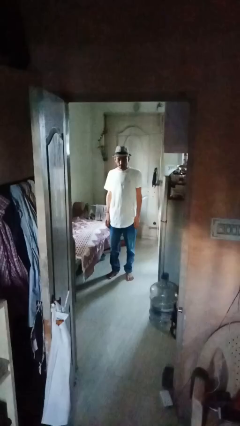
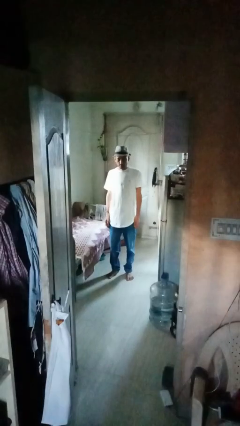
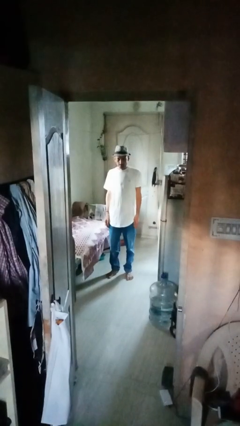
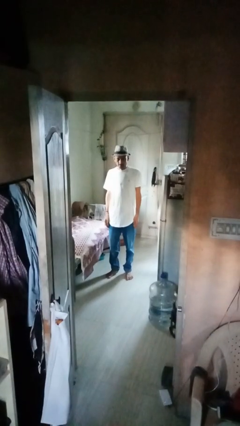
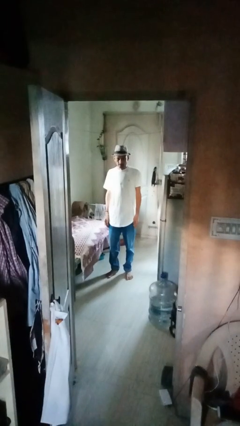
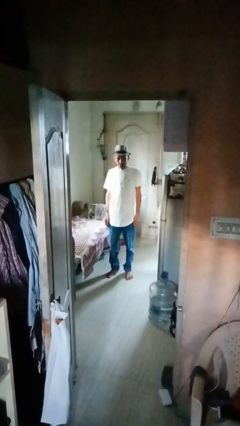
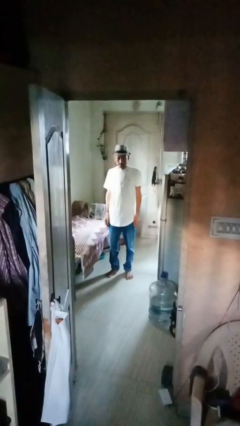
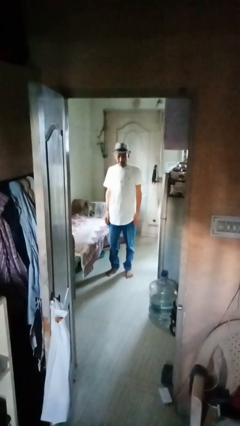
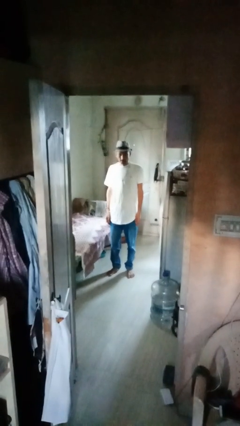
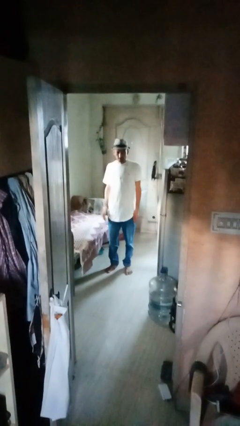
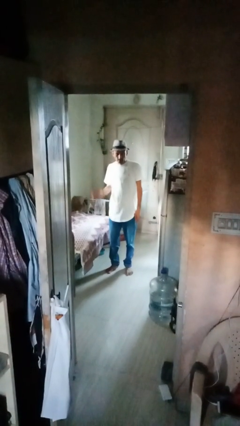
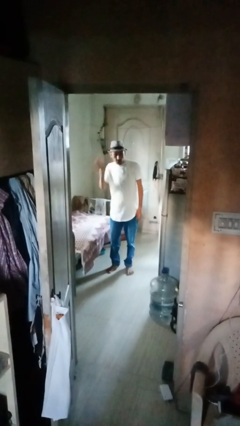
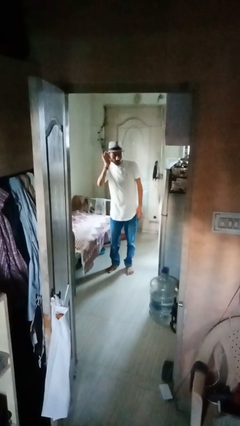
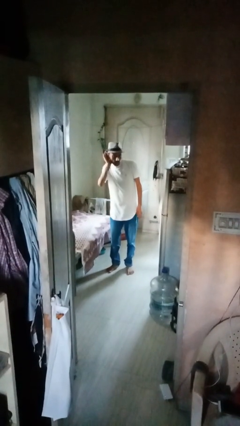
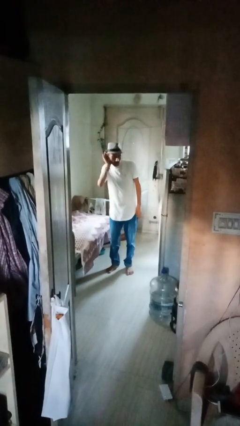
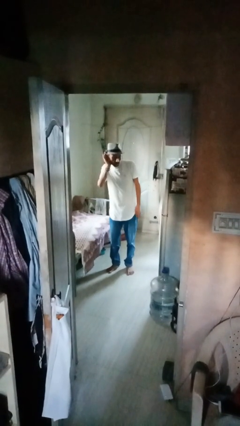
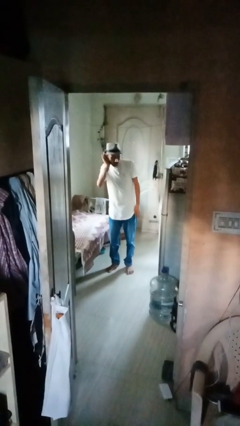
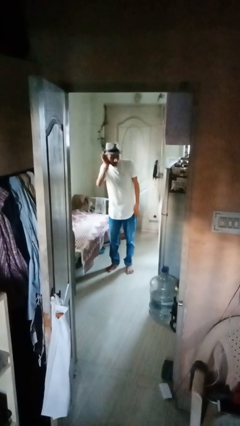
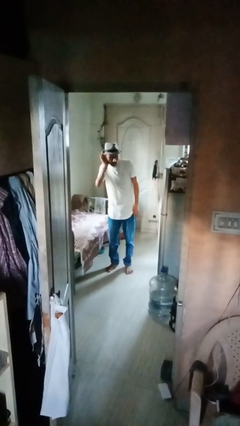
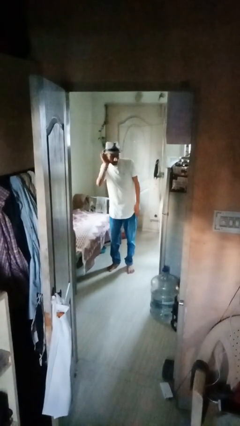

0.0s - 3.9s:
person gestures listen closely

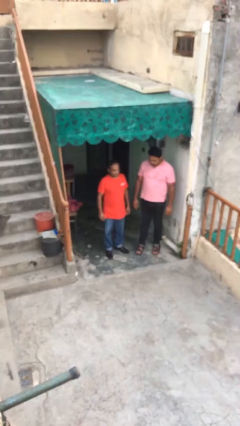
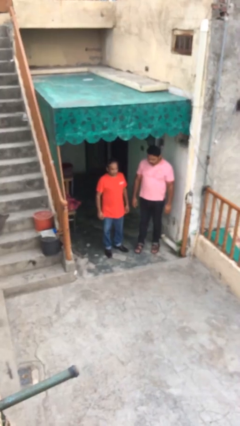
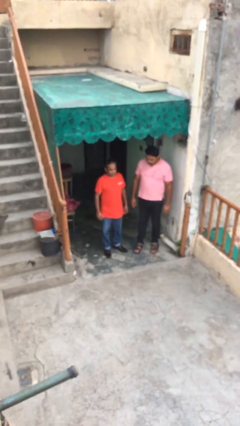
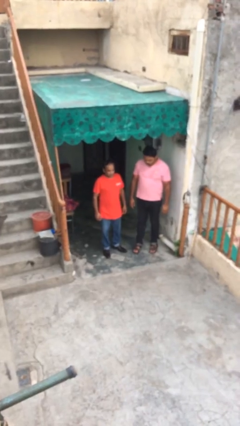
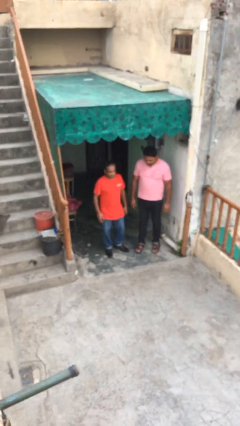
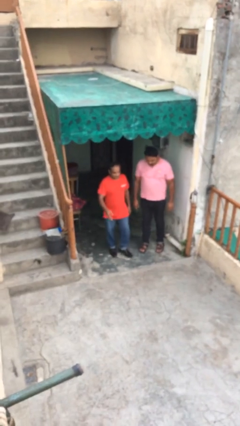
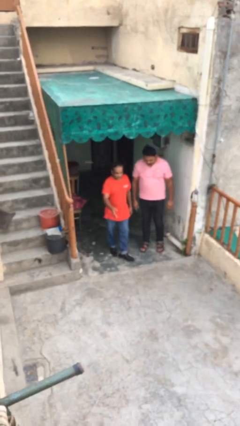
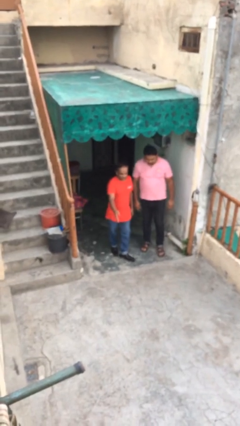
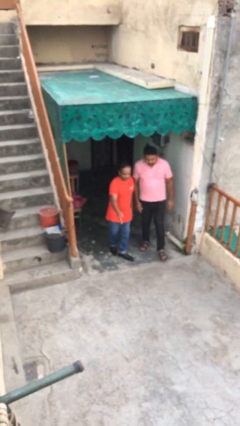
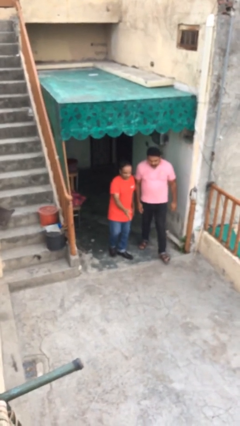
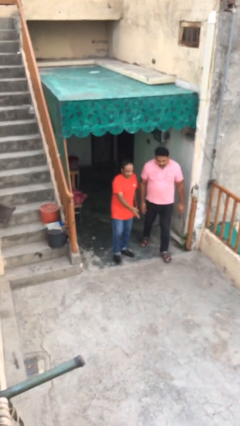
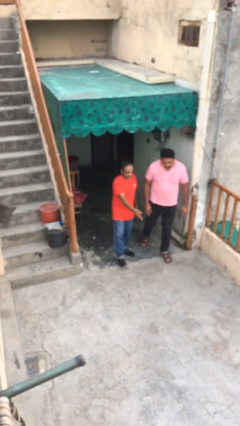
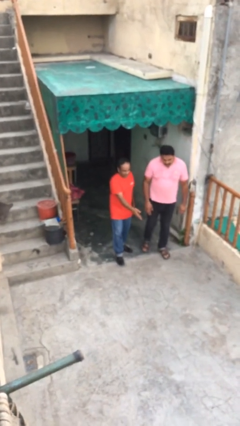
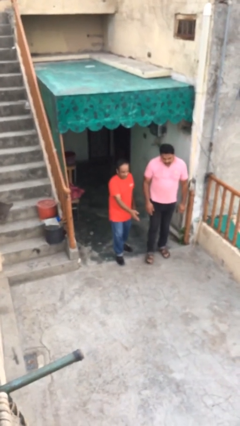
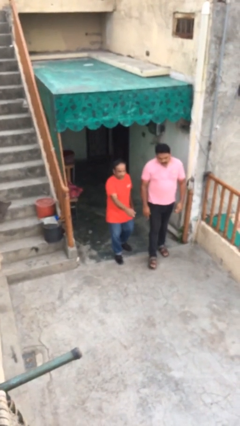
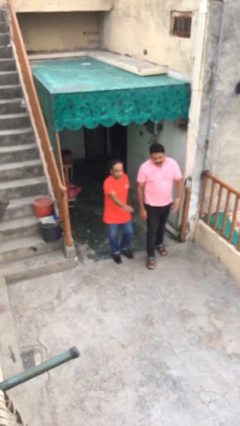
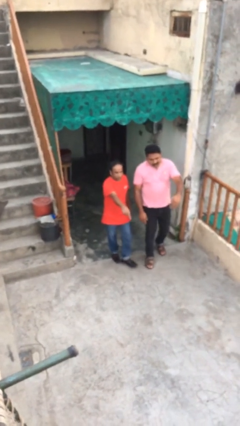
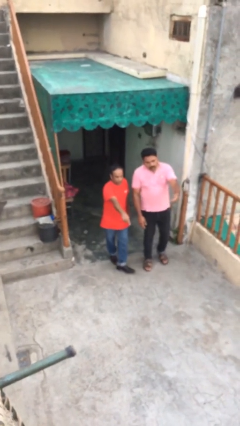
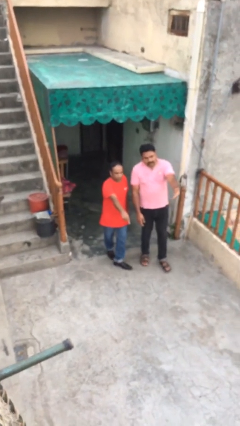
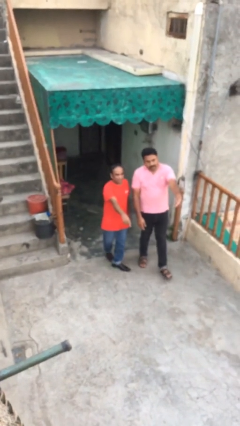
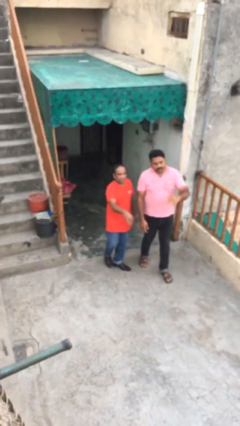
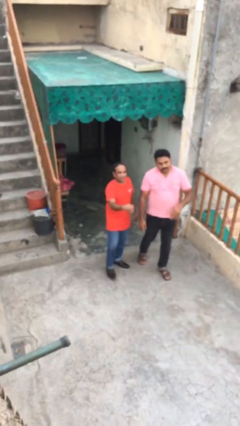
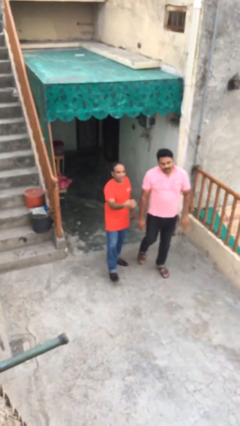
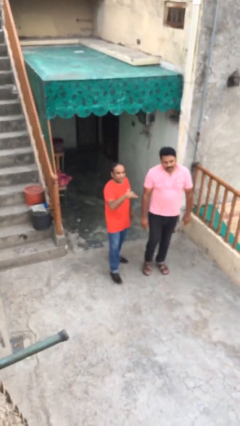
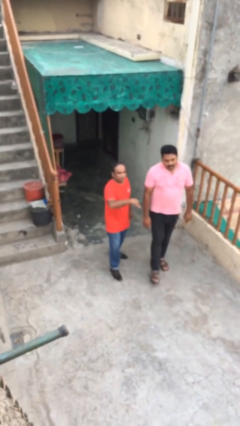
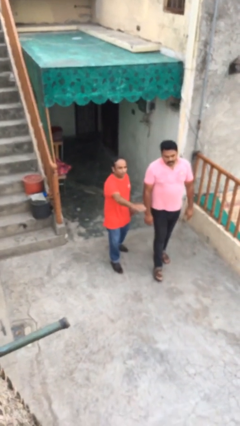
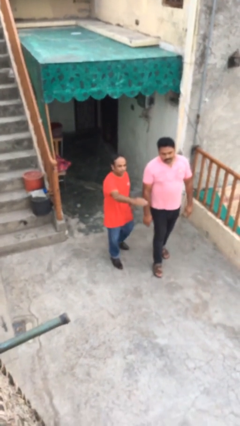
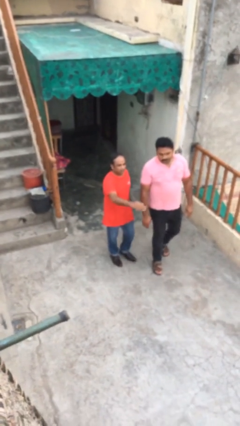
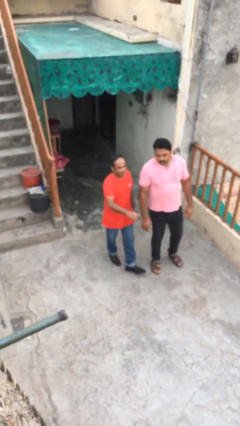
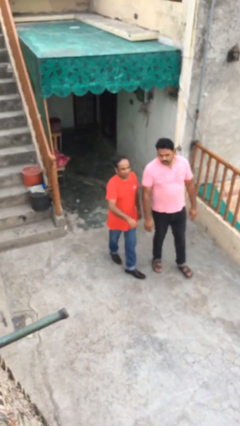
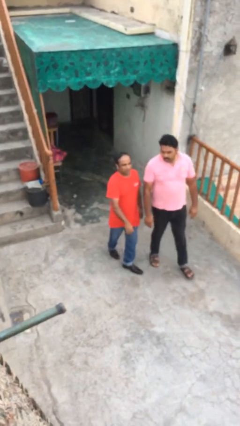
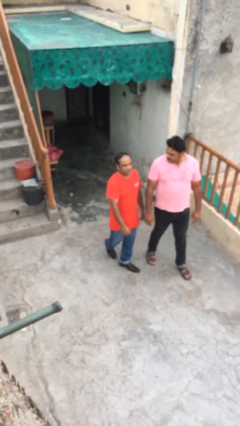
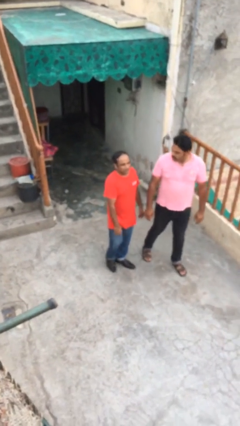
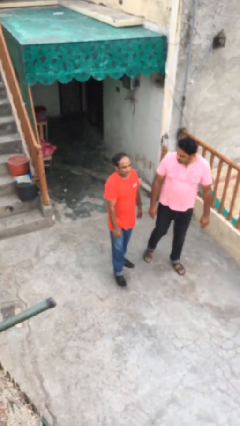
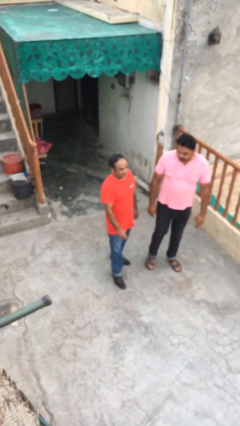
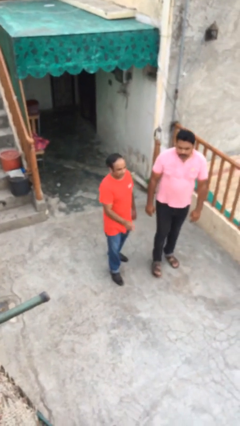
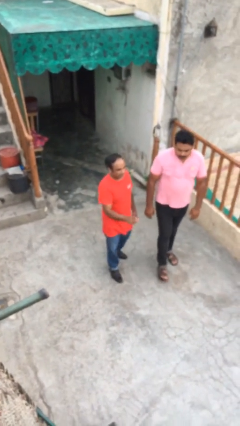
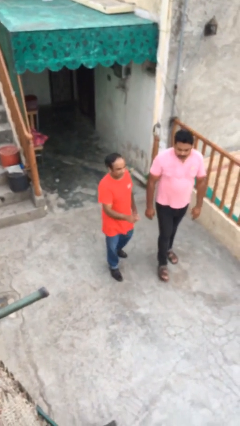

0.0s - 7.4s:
person talks to person

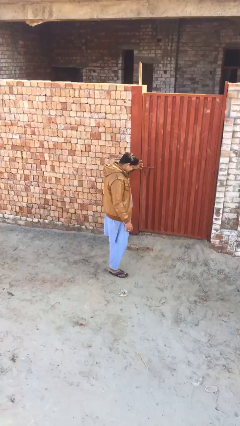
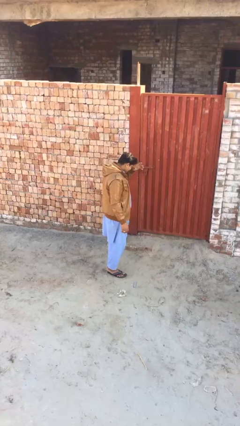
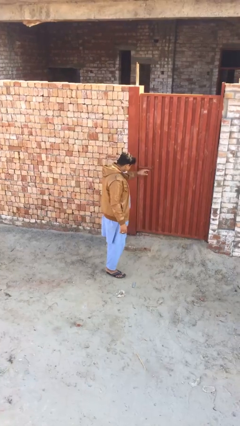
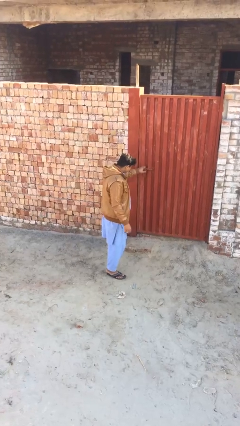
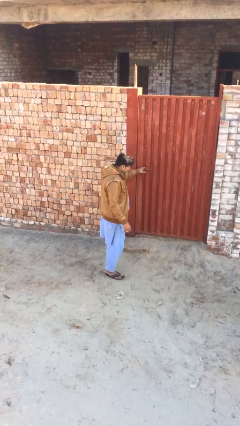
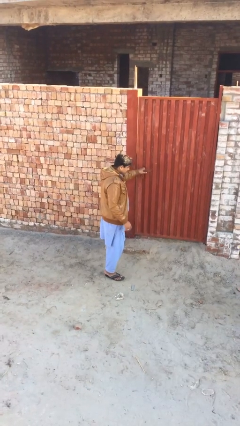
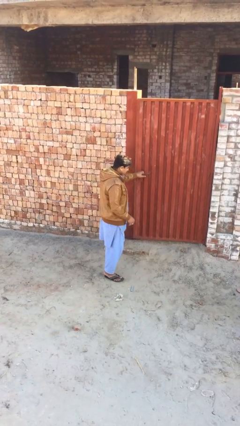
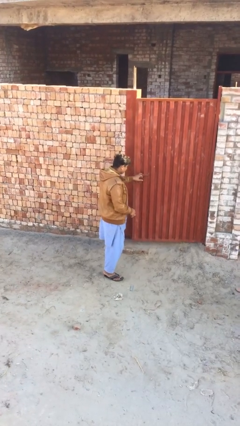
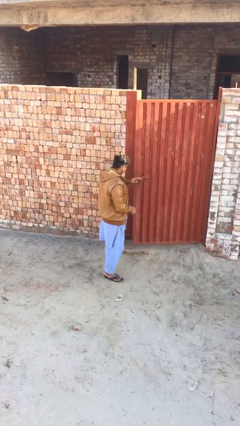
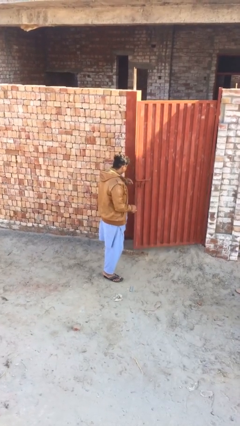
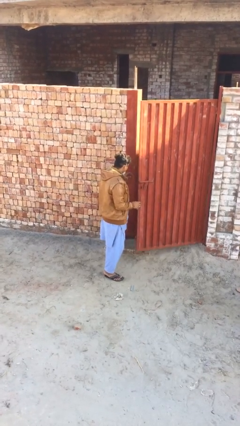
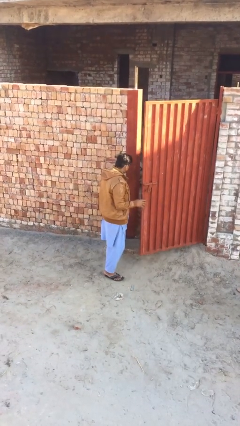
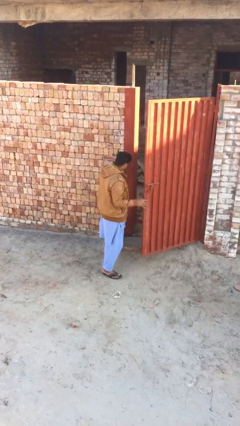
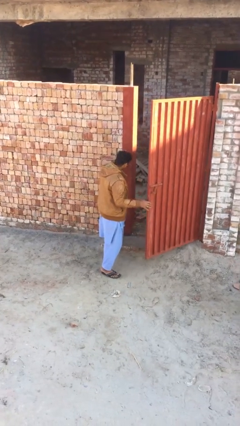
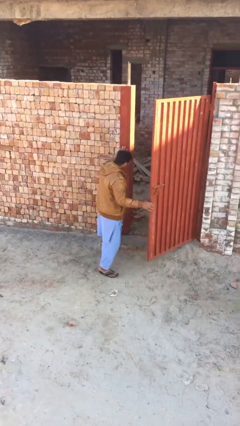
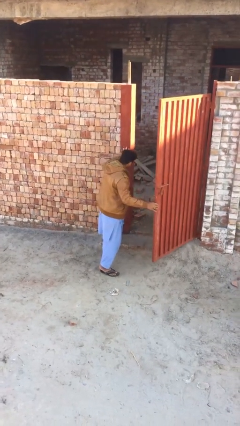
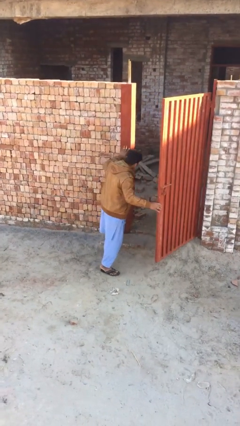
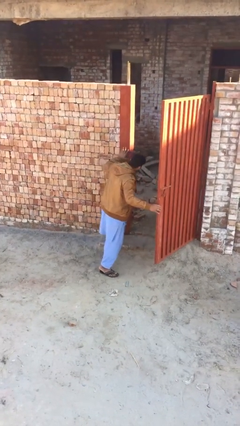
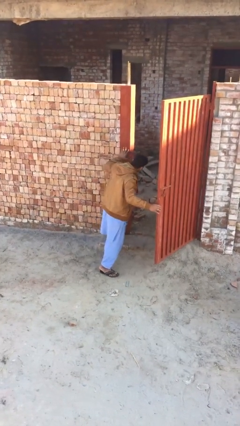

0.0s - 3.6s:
person opens facility door

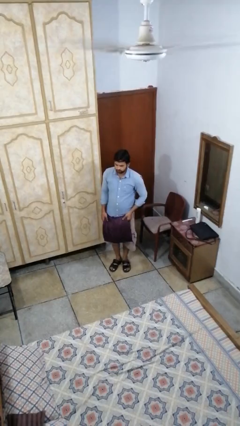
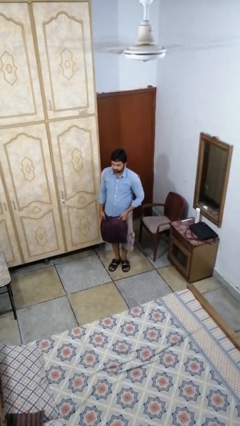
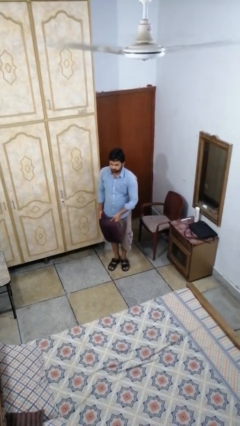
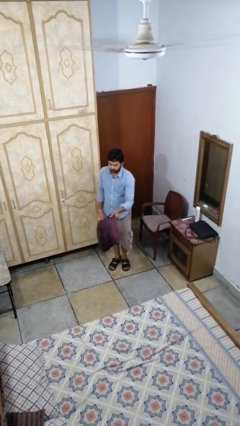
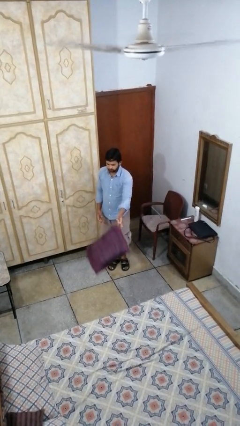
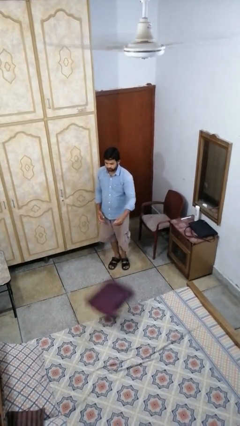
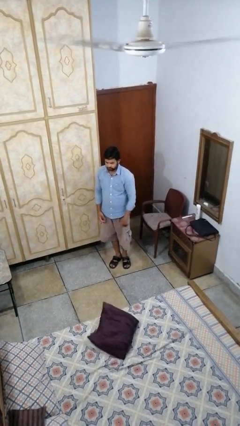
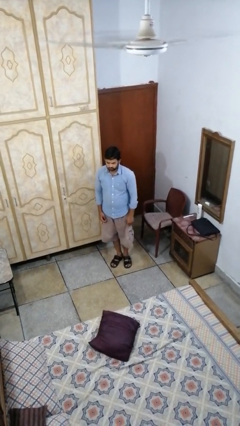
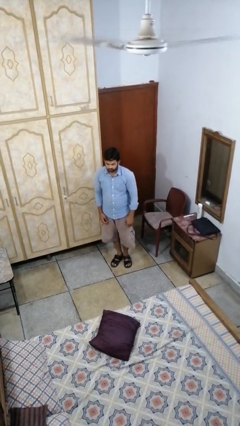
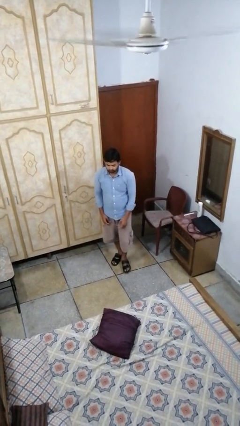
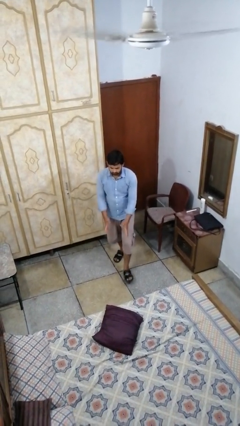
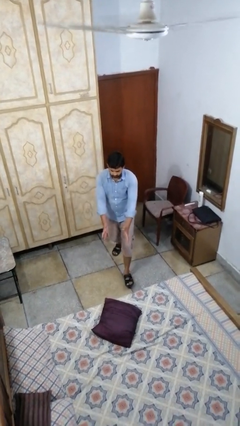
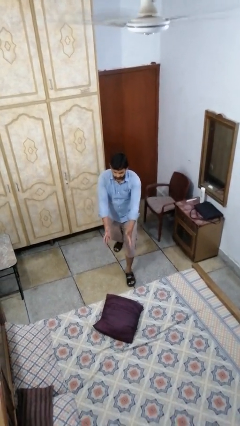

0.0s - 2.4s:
person throws object on bed

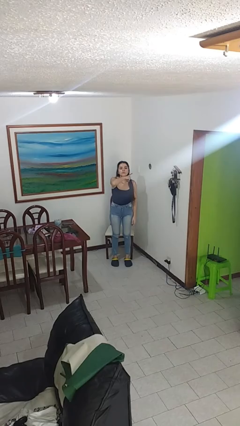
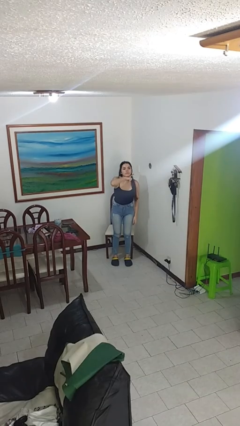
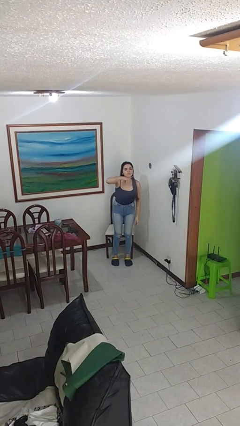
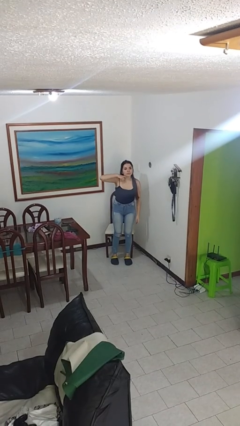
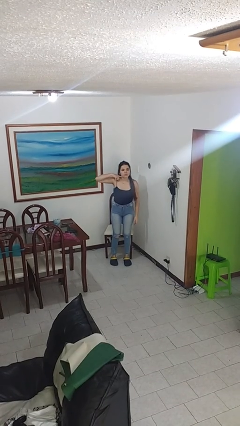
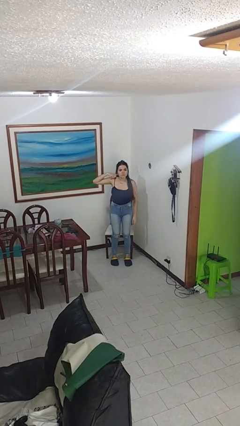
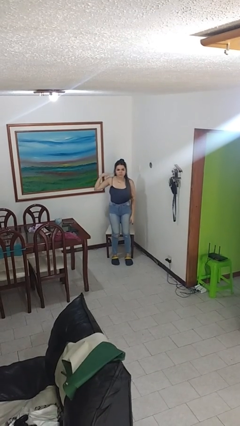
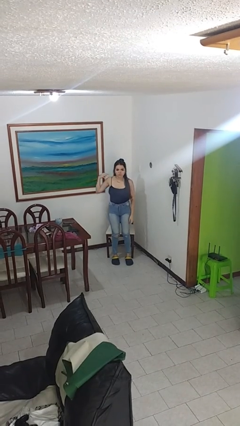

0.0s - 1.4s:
person gestures cut
